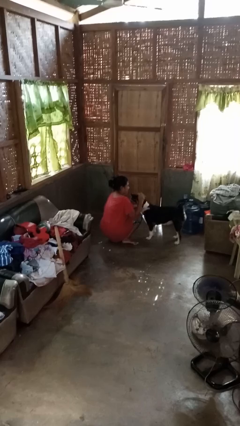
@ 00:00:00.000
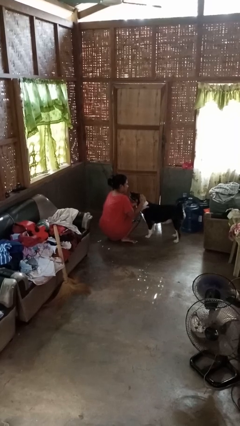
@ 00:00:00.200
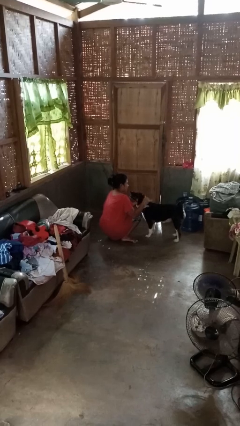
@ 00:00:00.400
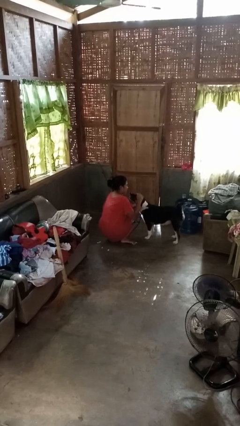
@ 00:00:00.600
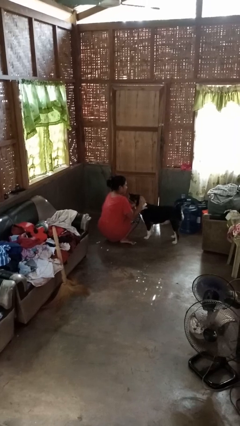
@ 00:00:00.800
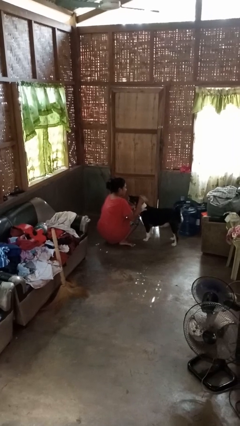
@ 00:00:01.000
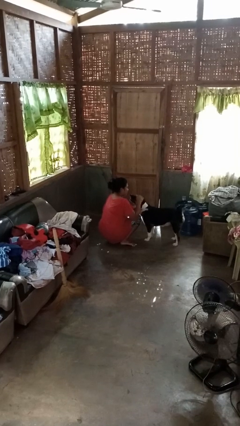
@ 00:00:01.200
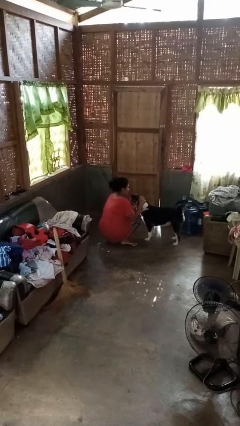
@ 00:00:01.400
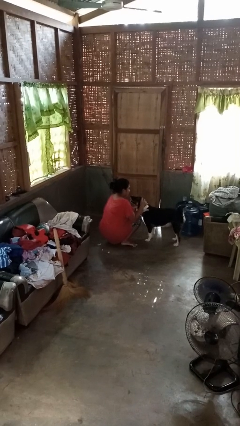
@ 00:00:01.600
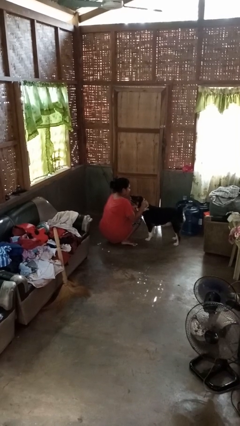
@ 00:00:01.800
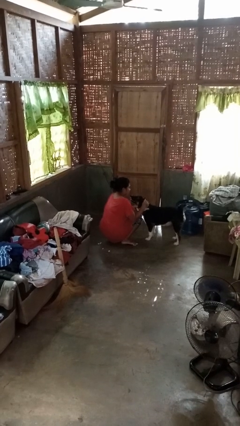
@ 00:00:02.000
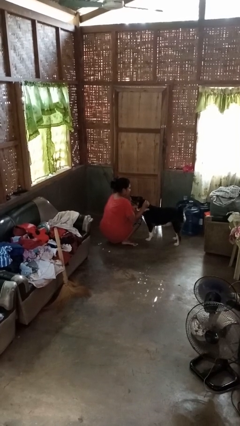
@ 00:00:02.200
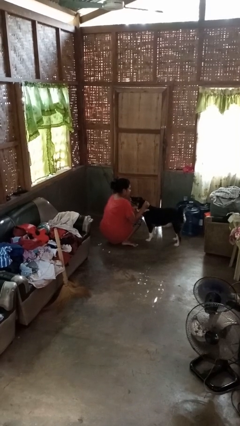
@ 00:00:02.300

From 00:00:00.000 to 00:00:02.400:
person pets dog

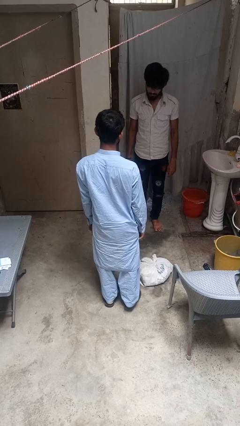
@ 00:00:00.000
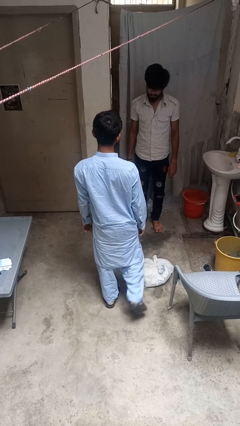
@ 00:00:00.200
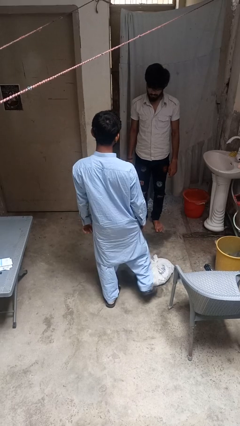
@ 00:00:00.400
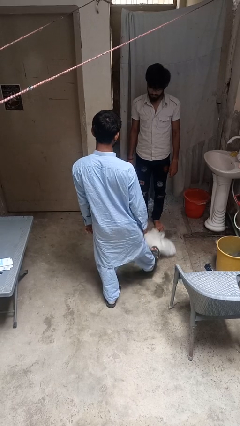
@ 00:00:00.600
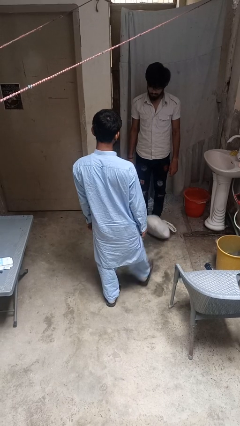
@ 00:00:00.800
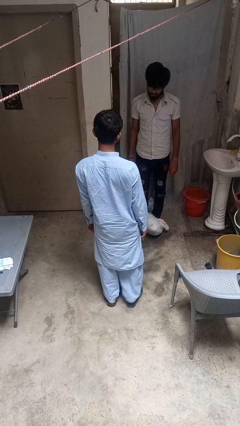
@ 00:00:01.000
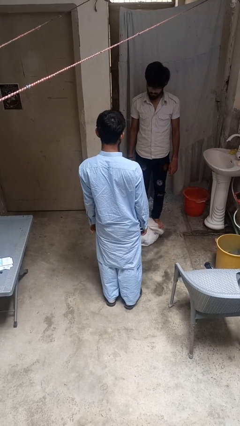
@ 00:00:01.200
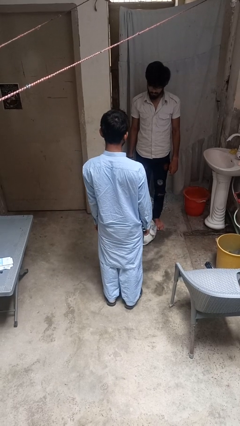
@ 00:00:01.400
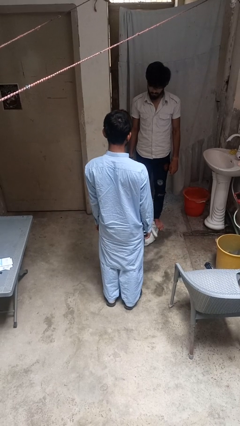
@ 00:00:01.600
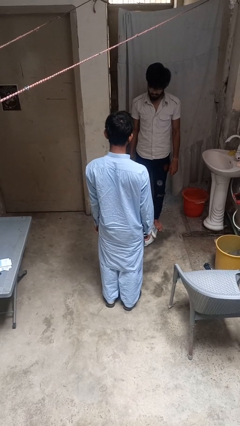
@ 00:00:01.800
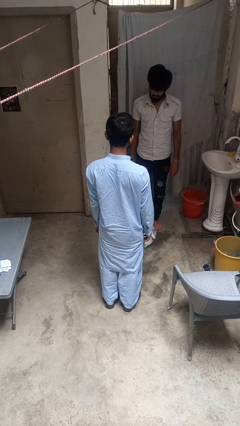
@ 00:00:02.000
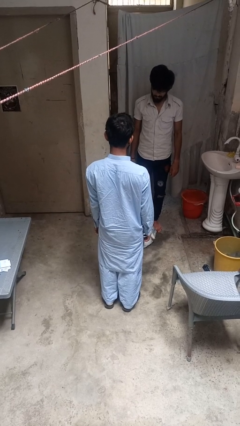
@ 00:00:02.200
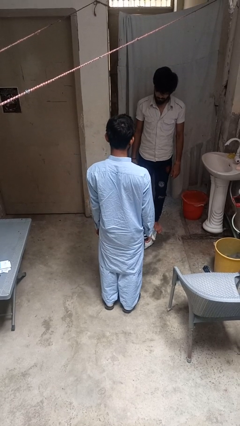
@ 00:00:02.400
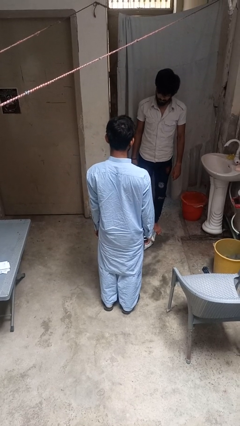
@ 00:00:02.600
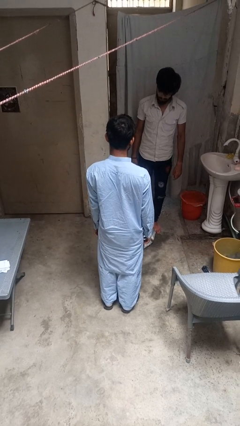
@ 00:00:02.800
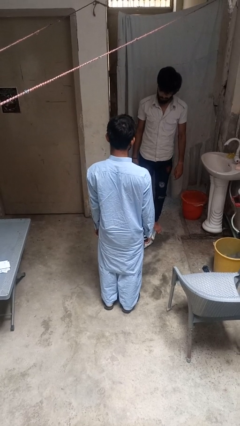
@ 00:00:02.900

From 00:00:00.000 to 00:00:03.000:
person kicks object to person

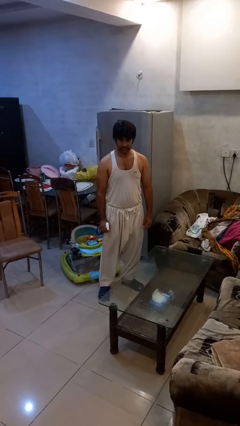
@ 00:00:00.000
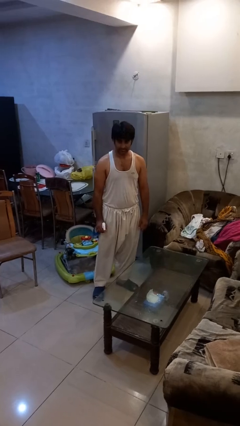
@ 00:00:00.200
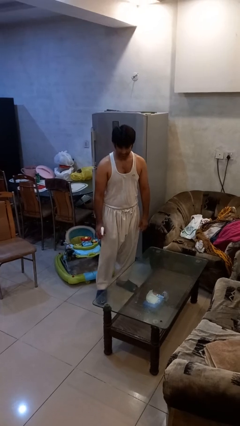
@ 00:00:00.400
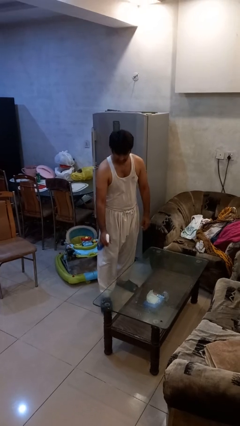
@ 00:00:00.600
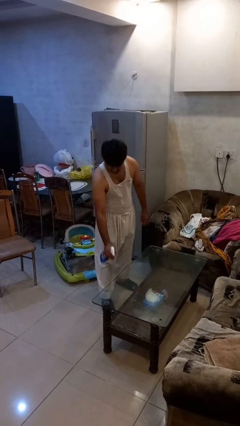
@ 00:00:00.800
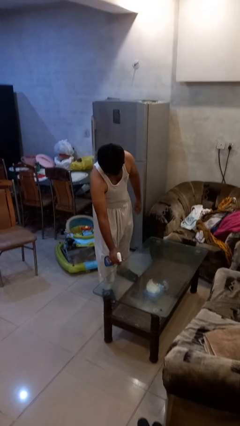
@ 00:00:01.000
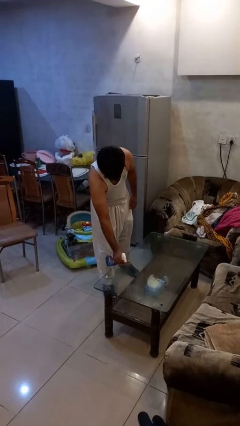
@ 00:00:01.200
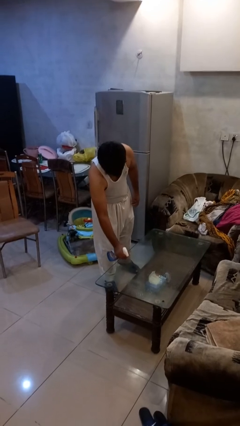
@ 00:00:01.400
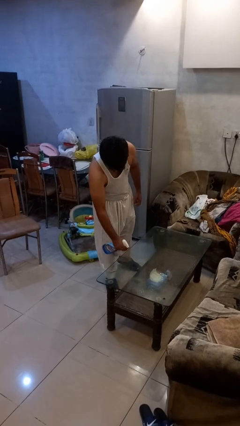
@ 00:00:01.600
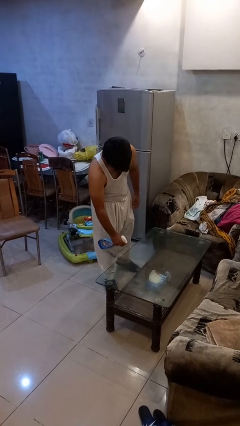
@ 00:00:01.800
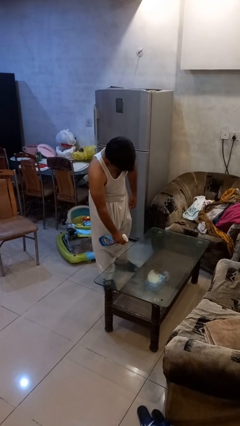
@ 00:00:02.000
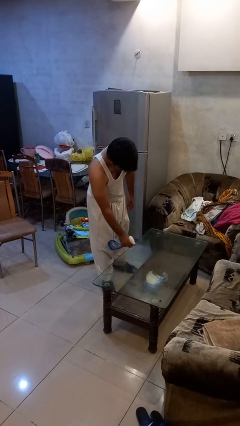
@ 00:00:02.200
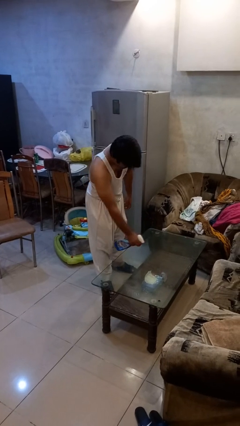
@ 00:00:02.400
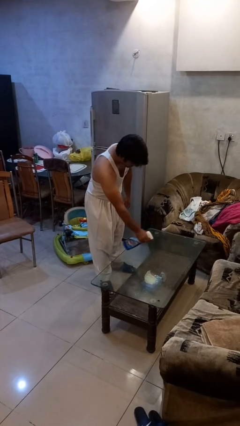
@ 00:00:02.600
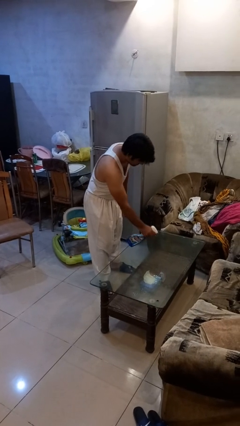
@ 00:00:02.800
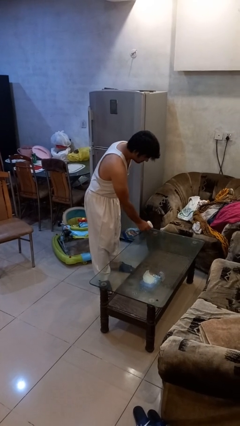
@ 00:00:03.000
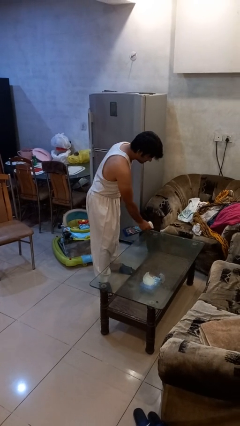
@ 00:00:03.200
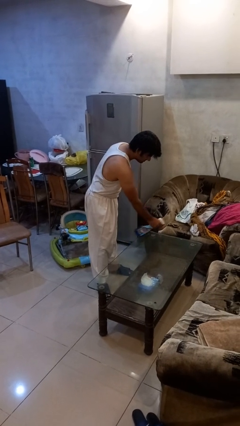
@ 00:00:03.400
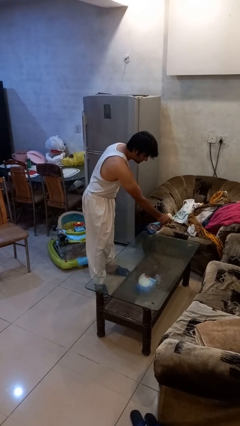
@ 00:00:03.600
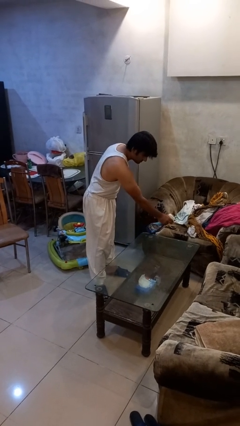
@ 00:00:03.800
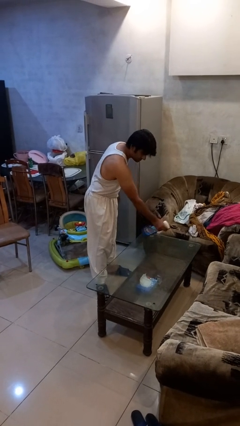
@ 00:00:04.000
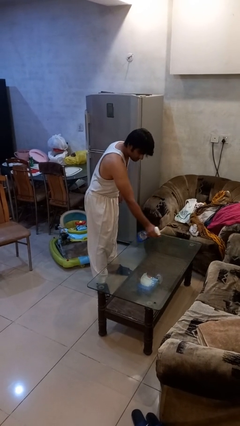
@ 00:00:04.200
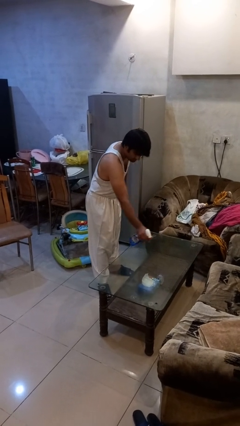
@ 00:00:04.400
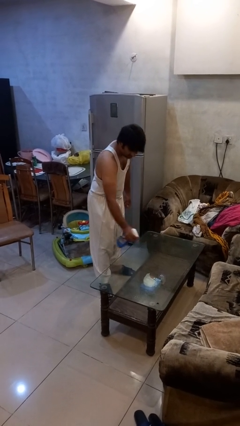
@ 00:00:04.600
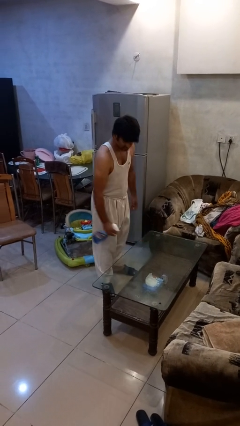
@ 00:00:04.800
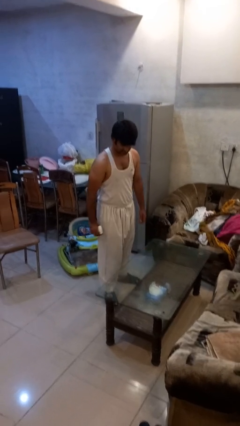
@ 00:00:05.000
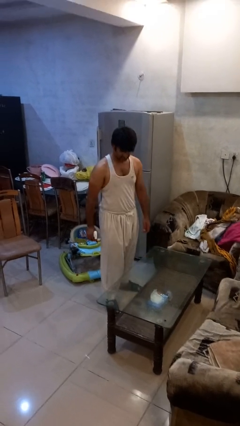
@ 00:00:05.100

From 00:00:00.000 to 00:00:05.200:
person sprays from bottle

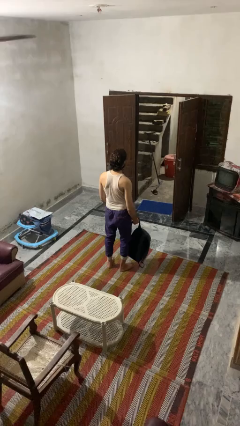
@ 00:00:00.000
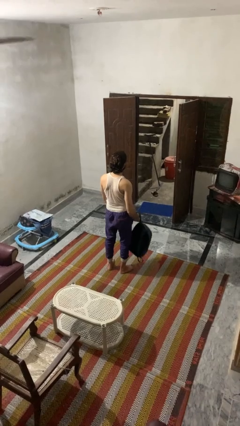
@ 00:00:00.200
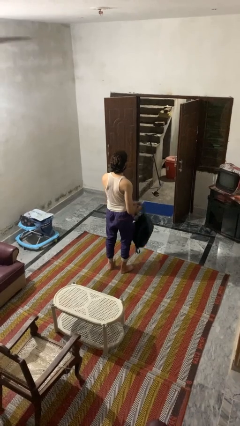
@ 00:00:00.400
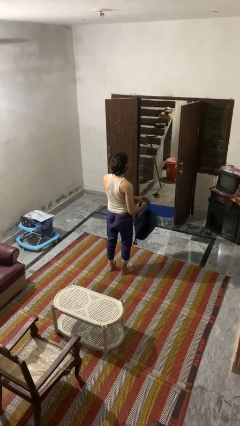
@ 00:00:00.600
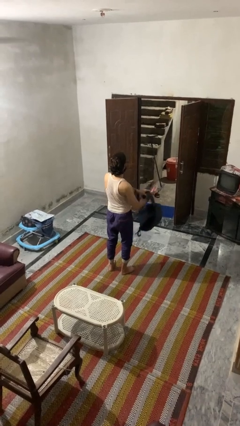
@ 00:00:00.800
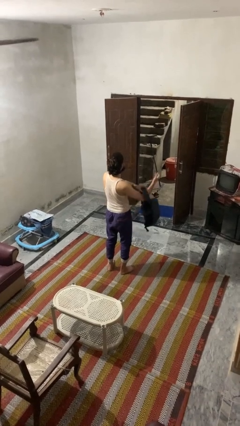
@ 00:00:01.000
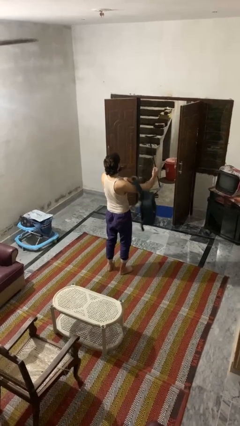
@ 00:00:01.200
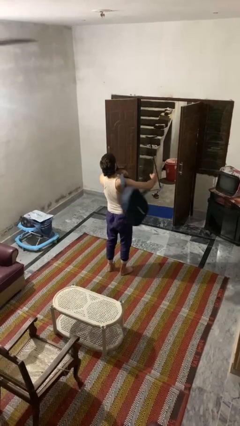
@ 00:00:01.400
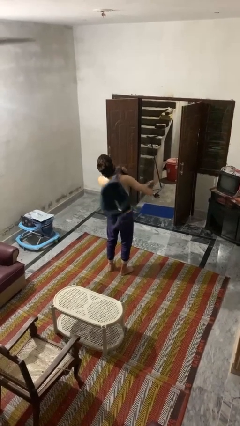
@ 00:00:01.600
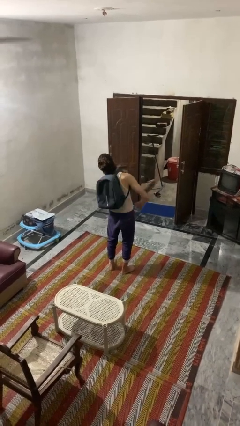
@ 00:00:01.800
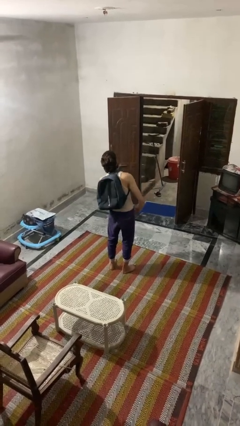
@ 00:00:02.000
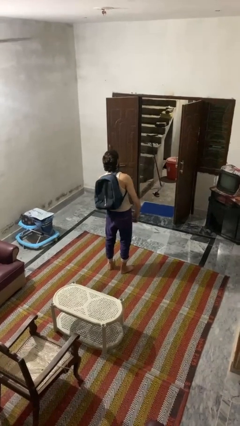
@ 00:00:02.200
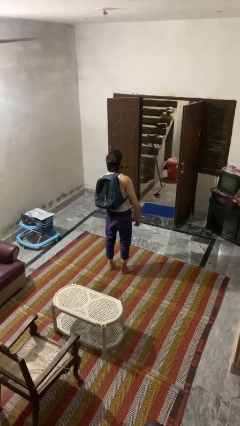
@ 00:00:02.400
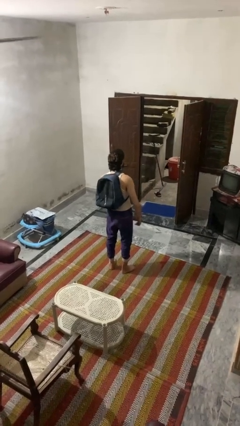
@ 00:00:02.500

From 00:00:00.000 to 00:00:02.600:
person puts on backpack

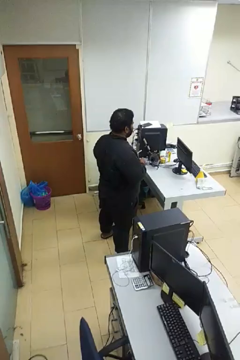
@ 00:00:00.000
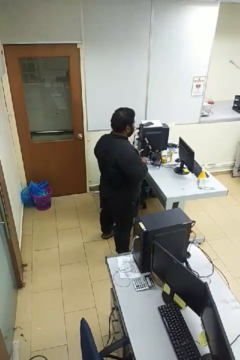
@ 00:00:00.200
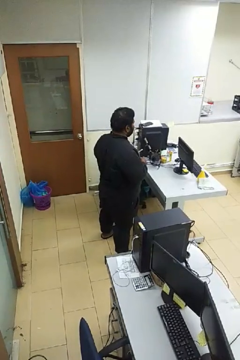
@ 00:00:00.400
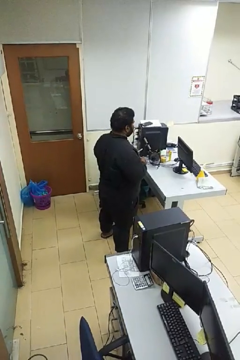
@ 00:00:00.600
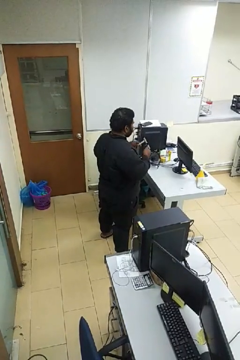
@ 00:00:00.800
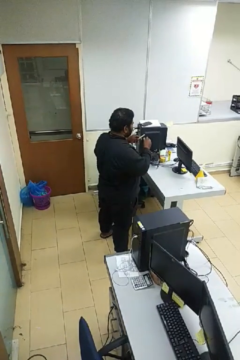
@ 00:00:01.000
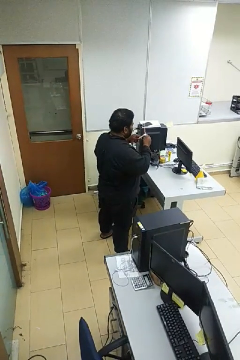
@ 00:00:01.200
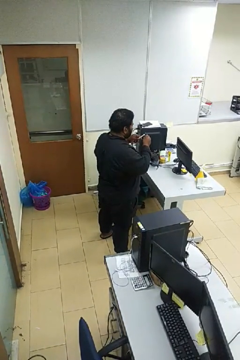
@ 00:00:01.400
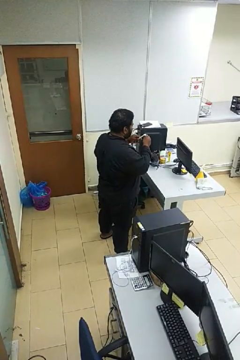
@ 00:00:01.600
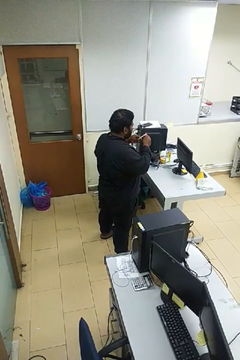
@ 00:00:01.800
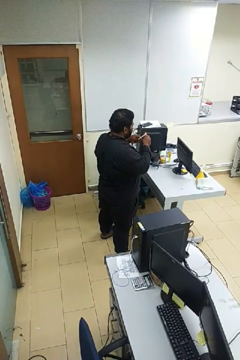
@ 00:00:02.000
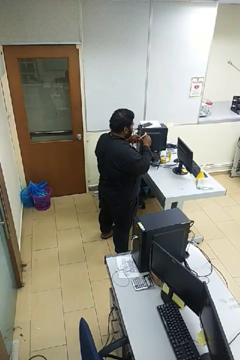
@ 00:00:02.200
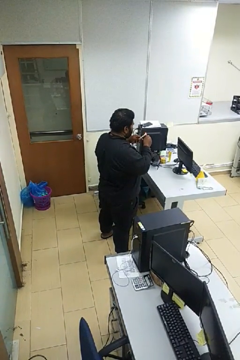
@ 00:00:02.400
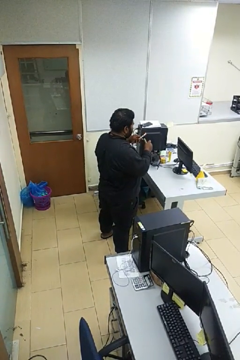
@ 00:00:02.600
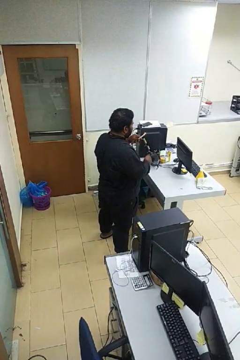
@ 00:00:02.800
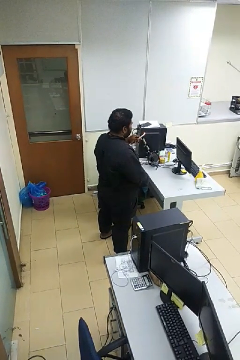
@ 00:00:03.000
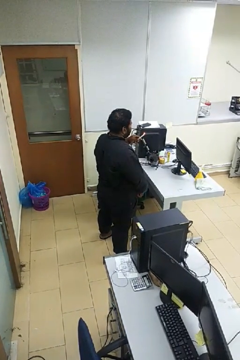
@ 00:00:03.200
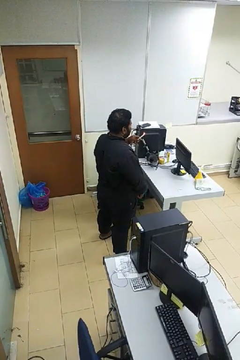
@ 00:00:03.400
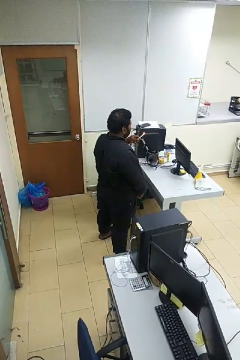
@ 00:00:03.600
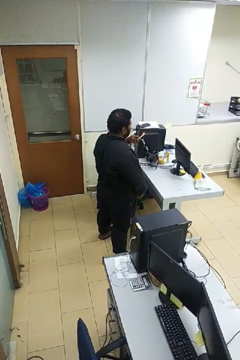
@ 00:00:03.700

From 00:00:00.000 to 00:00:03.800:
person lights candle

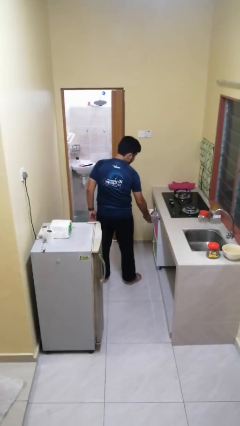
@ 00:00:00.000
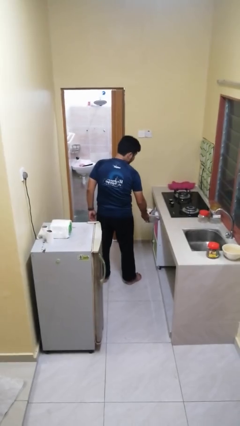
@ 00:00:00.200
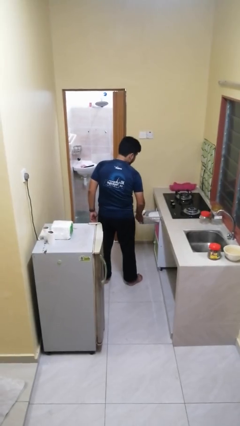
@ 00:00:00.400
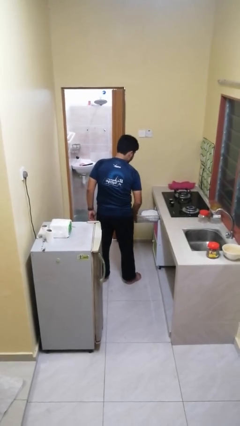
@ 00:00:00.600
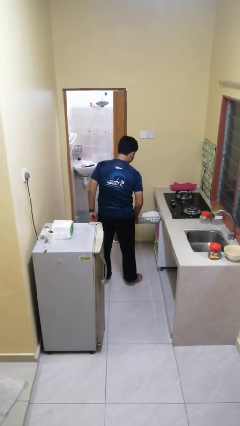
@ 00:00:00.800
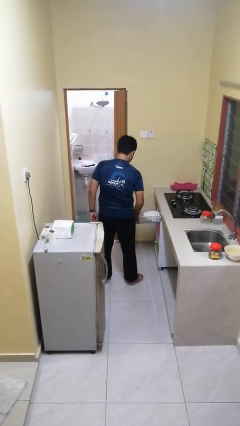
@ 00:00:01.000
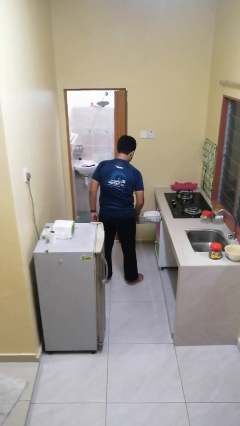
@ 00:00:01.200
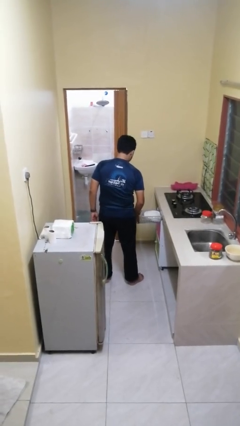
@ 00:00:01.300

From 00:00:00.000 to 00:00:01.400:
person opens kitchen drawer
